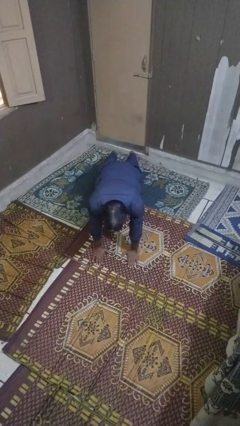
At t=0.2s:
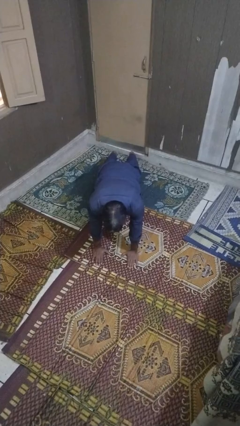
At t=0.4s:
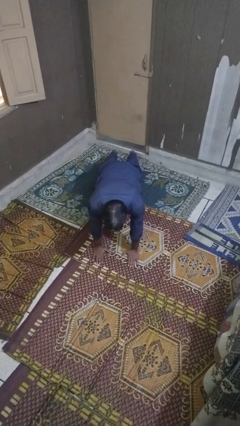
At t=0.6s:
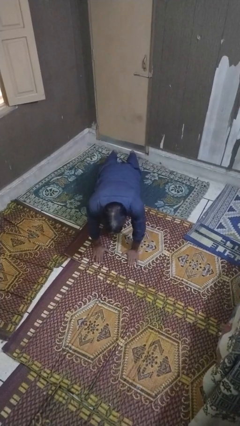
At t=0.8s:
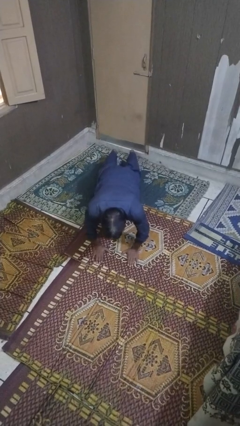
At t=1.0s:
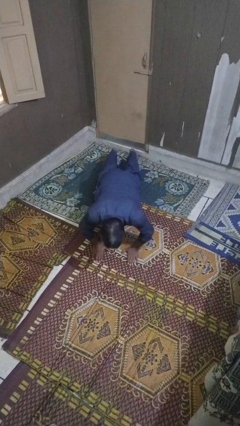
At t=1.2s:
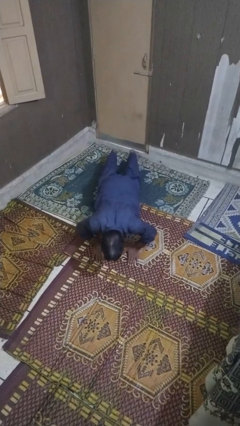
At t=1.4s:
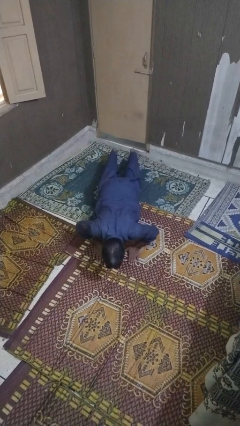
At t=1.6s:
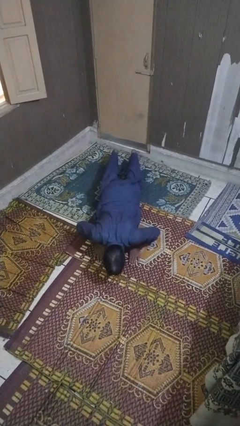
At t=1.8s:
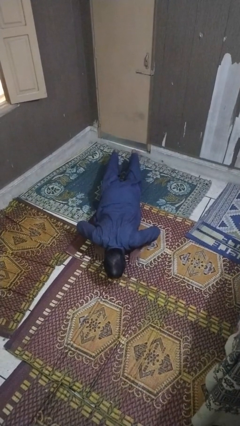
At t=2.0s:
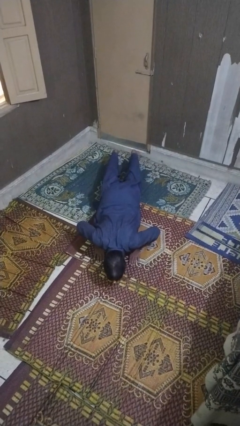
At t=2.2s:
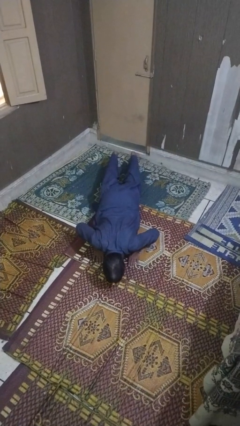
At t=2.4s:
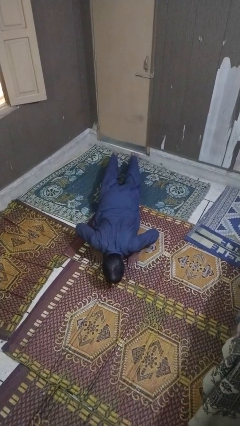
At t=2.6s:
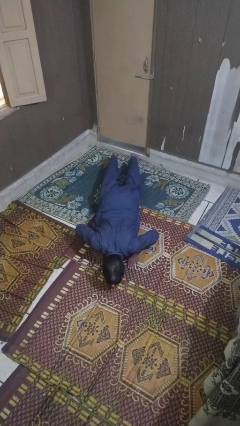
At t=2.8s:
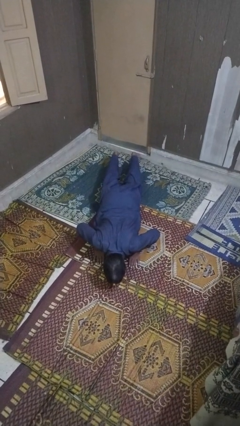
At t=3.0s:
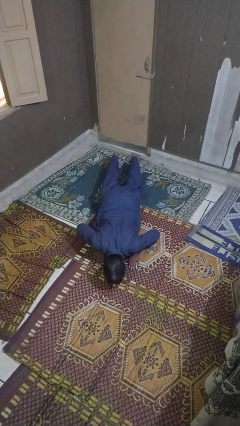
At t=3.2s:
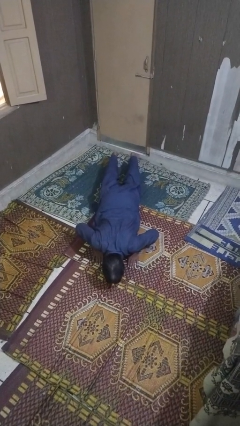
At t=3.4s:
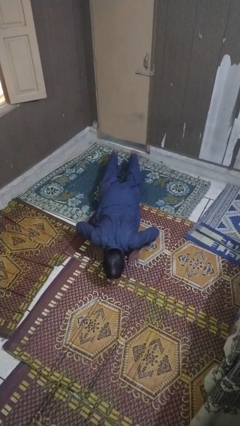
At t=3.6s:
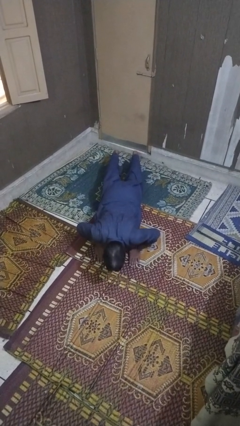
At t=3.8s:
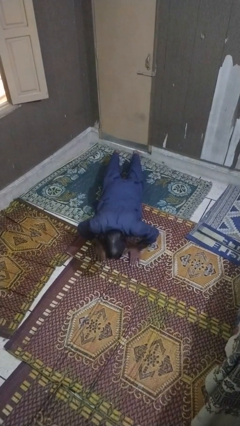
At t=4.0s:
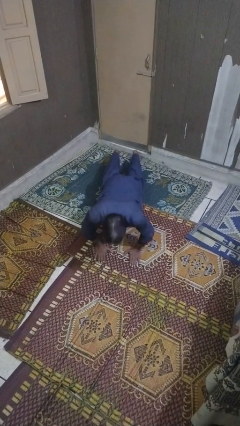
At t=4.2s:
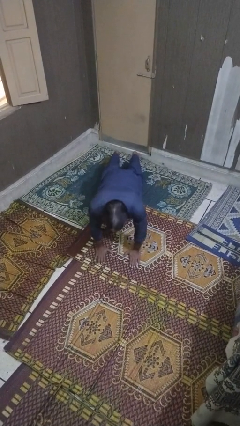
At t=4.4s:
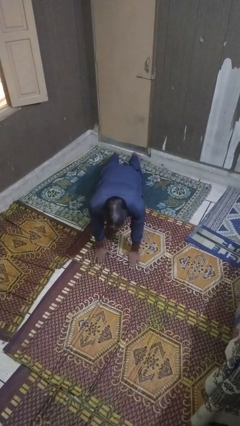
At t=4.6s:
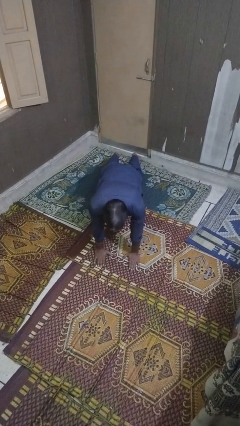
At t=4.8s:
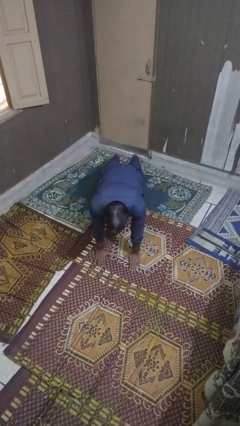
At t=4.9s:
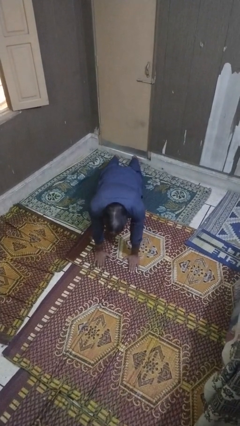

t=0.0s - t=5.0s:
person exercises with pushup

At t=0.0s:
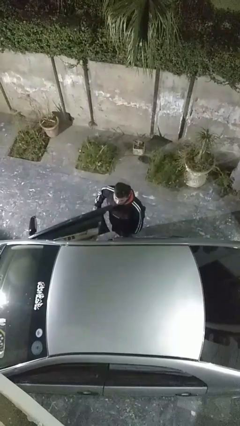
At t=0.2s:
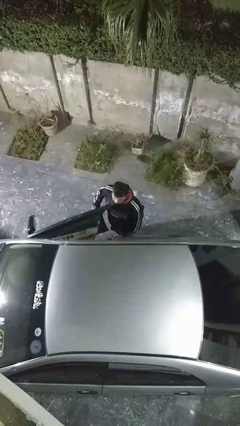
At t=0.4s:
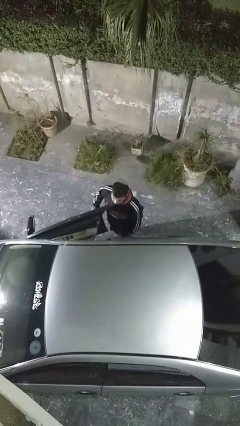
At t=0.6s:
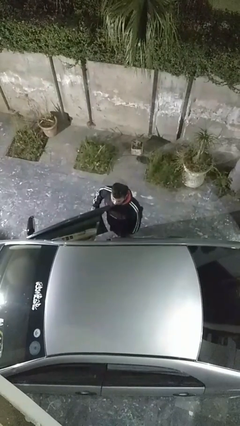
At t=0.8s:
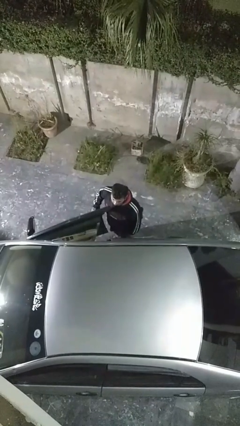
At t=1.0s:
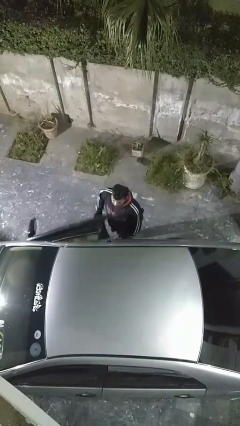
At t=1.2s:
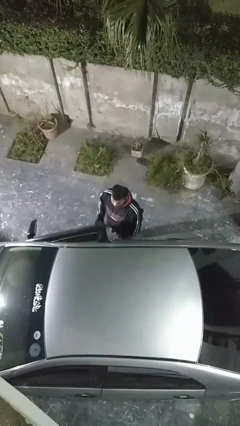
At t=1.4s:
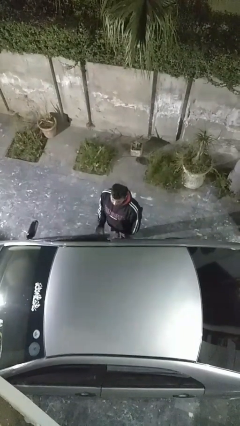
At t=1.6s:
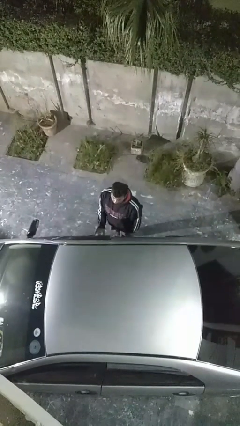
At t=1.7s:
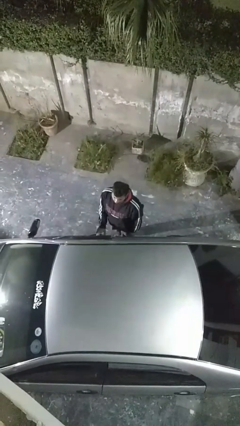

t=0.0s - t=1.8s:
person closes car door

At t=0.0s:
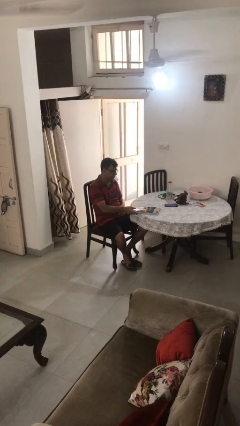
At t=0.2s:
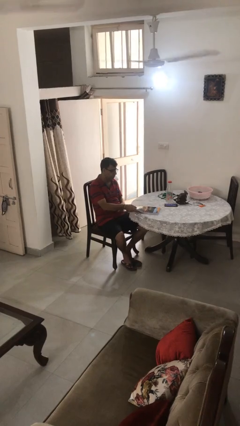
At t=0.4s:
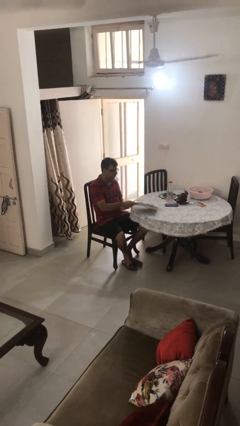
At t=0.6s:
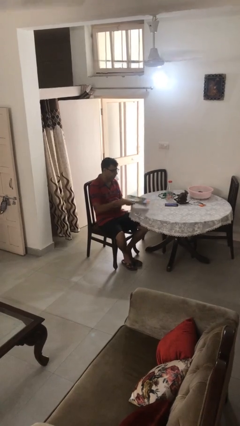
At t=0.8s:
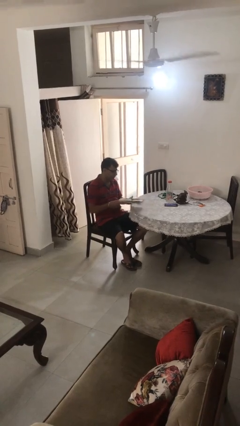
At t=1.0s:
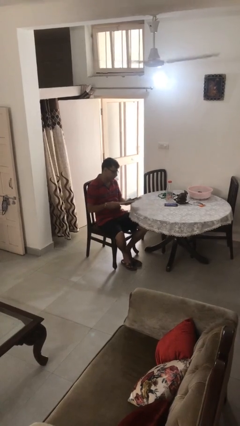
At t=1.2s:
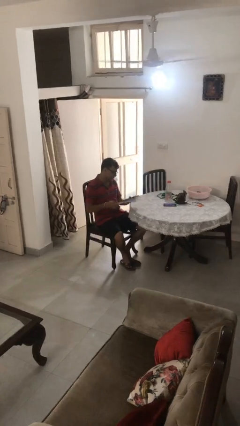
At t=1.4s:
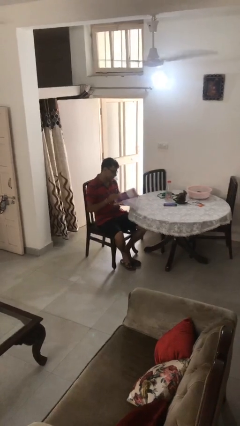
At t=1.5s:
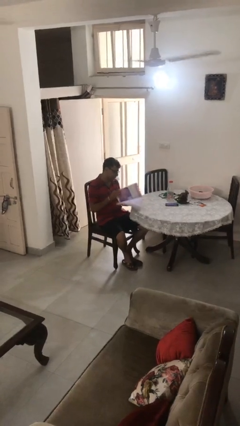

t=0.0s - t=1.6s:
person picks up object from table

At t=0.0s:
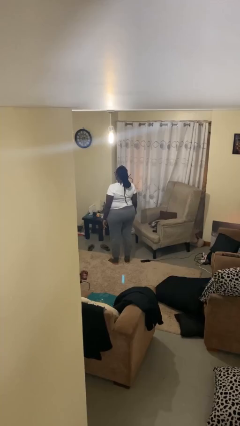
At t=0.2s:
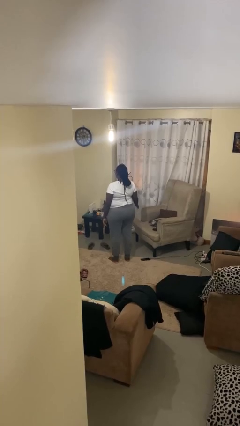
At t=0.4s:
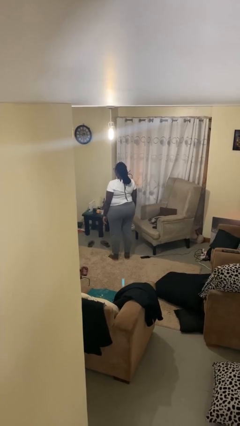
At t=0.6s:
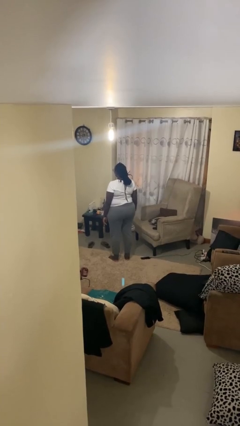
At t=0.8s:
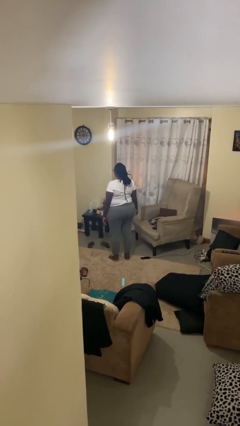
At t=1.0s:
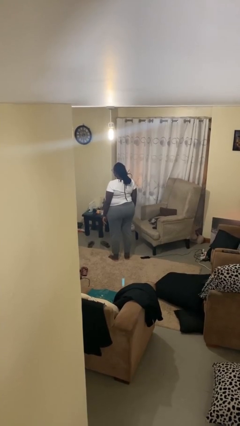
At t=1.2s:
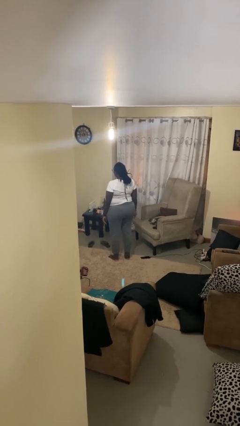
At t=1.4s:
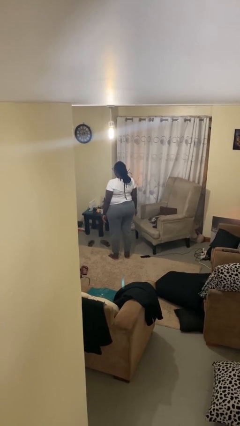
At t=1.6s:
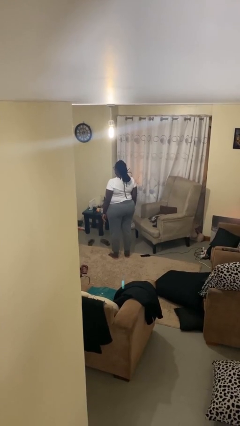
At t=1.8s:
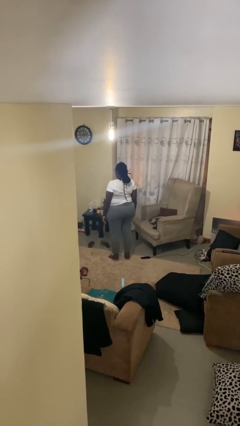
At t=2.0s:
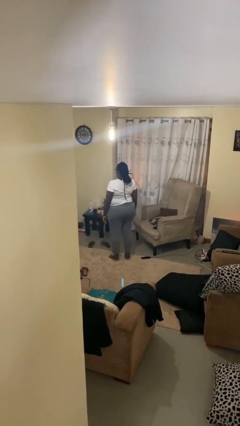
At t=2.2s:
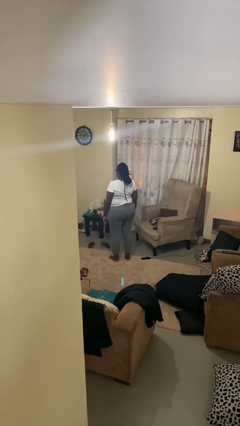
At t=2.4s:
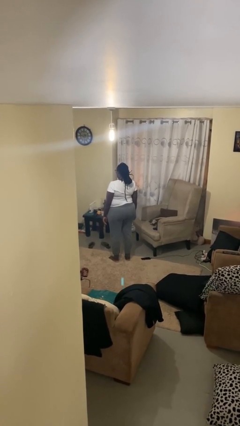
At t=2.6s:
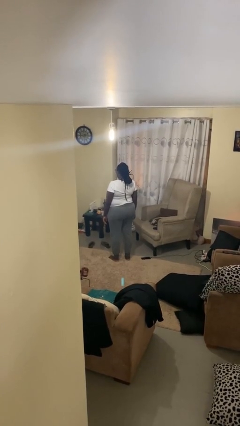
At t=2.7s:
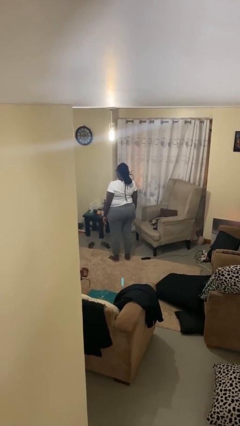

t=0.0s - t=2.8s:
person slaps hands on thighs

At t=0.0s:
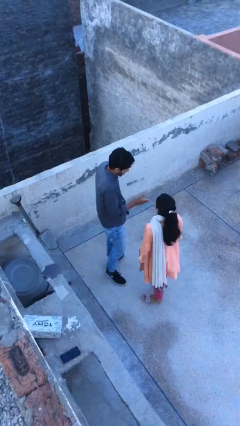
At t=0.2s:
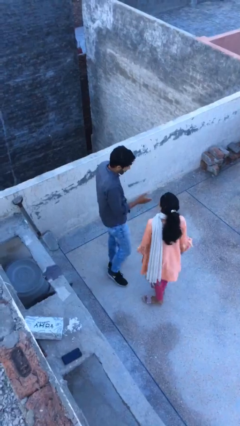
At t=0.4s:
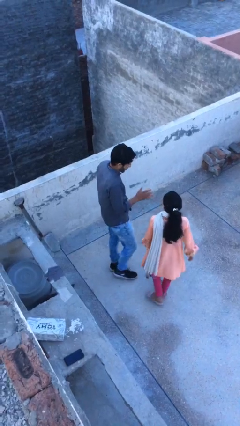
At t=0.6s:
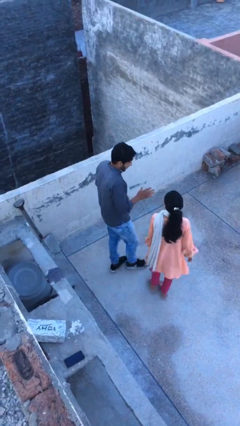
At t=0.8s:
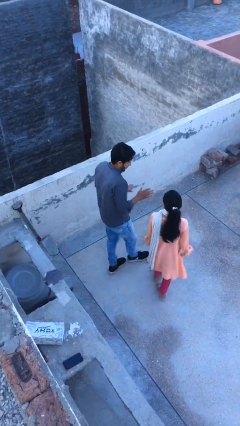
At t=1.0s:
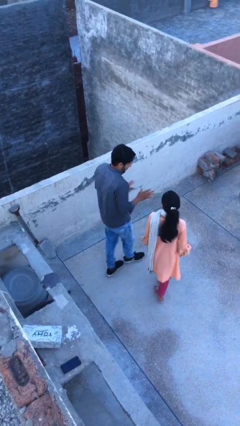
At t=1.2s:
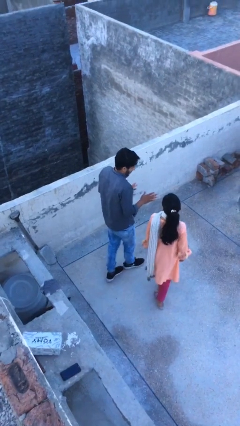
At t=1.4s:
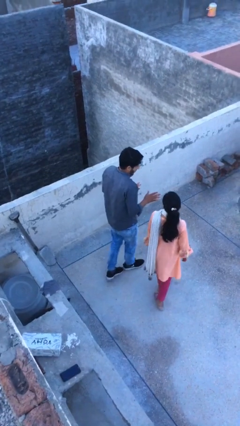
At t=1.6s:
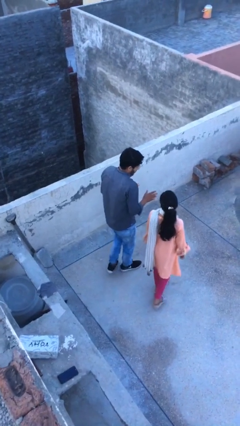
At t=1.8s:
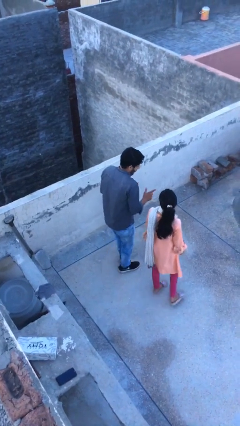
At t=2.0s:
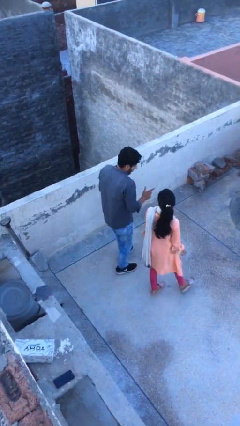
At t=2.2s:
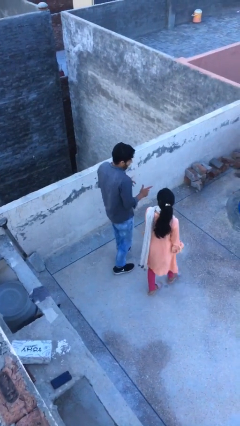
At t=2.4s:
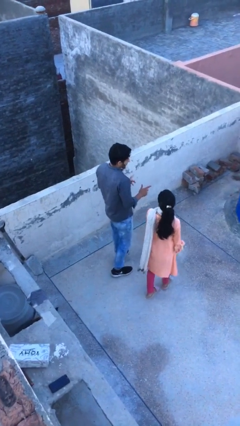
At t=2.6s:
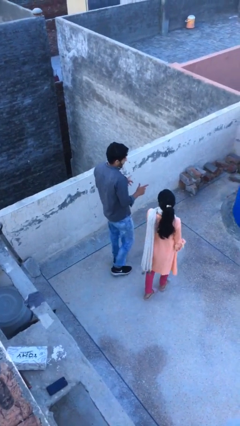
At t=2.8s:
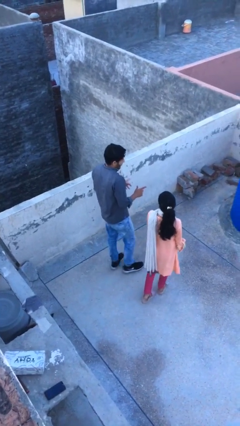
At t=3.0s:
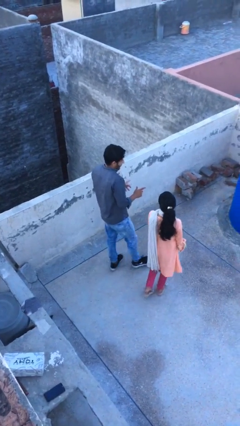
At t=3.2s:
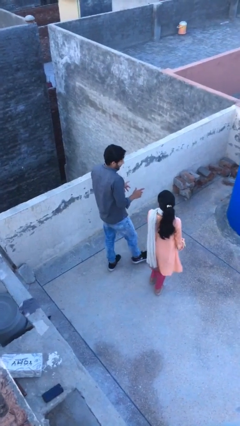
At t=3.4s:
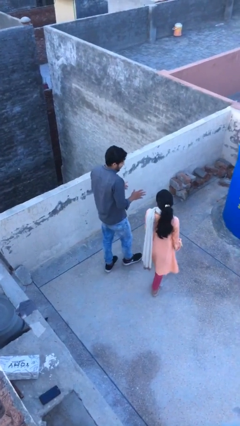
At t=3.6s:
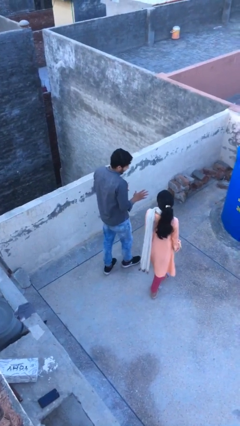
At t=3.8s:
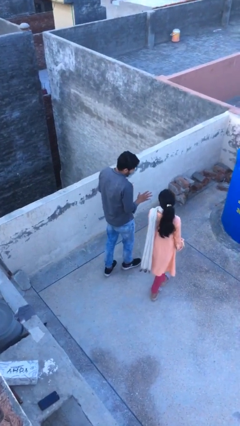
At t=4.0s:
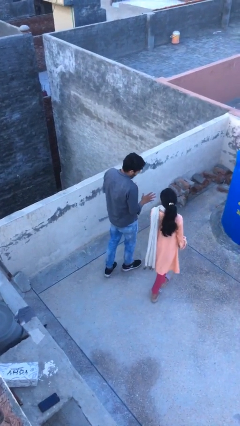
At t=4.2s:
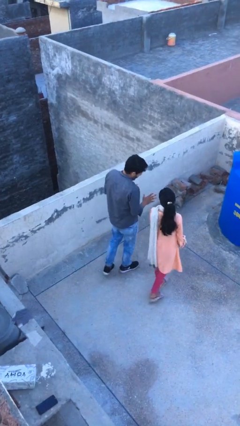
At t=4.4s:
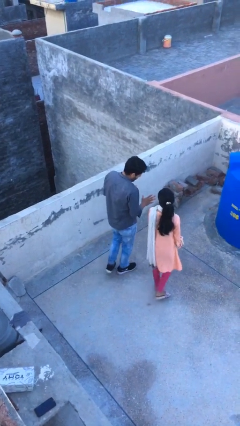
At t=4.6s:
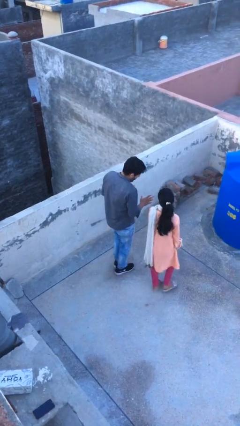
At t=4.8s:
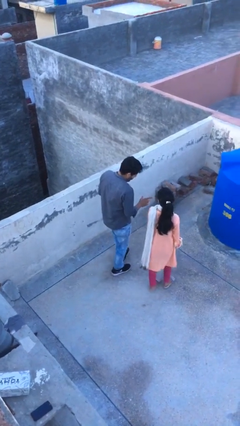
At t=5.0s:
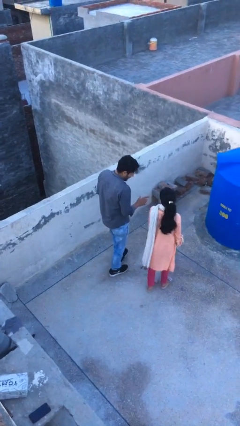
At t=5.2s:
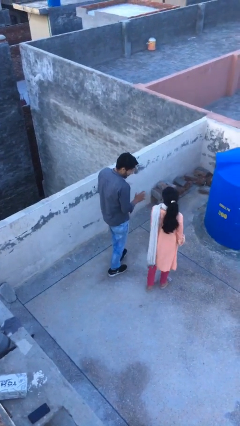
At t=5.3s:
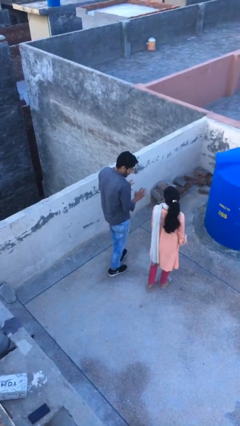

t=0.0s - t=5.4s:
person talks to person

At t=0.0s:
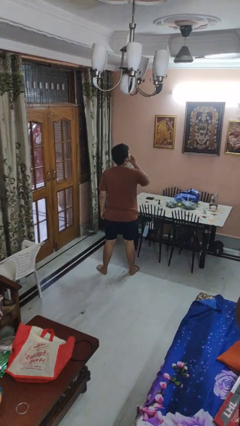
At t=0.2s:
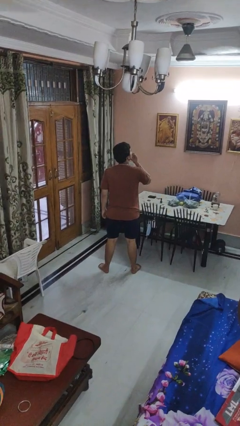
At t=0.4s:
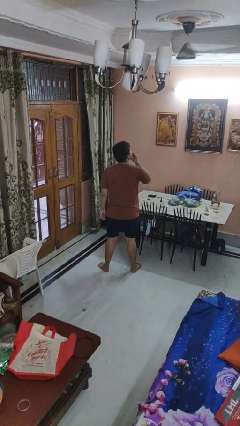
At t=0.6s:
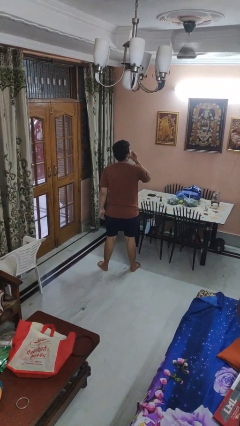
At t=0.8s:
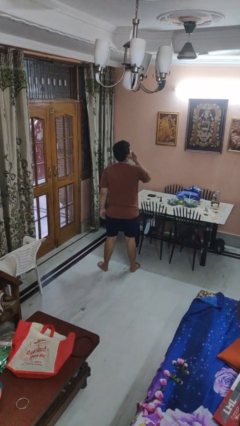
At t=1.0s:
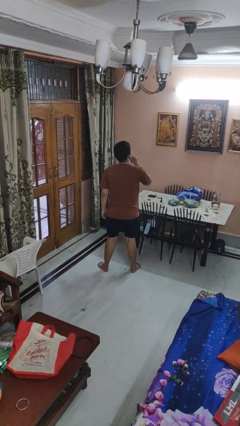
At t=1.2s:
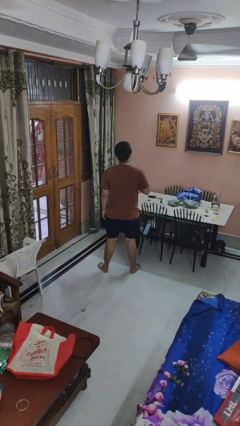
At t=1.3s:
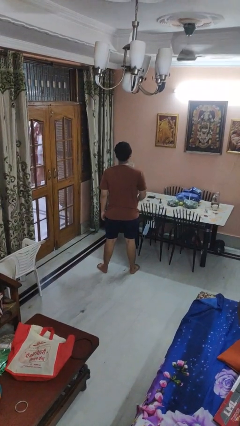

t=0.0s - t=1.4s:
person strokes chin
